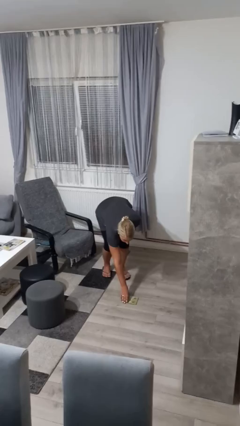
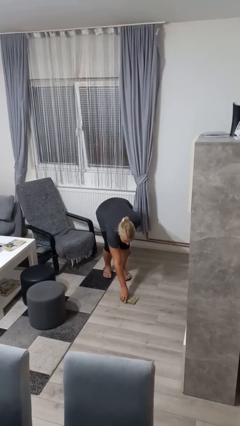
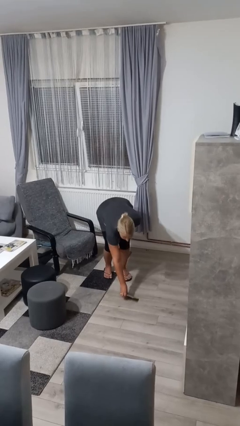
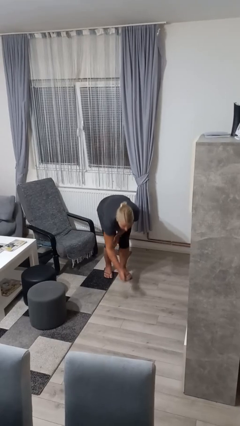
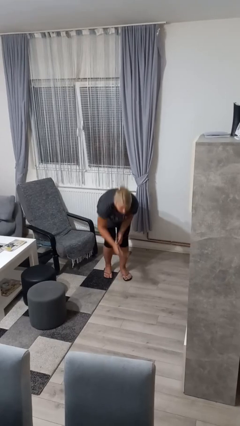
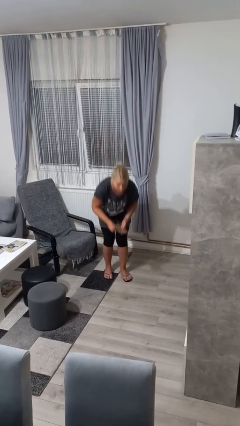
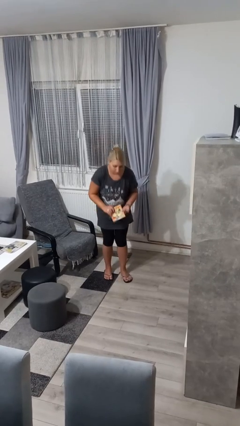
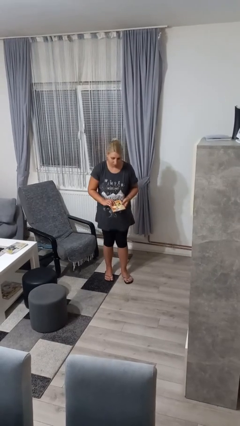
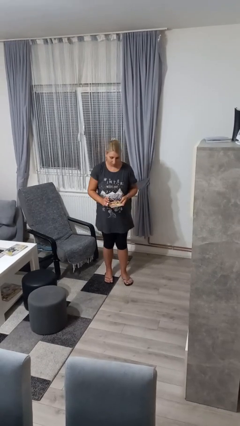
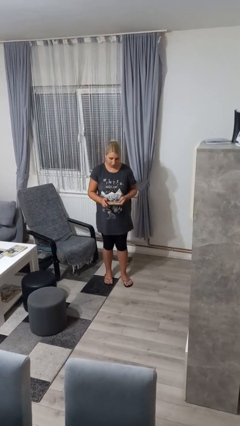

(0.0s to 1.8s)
person picks up object from floor

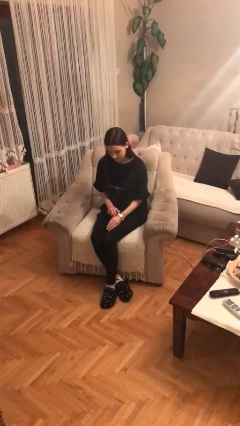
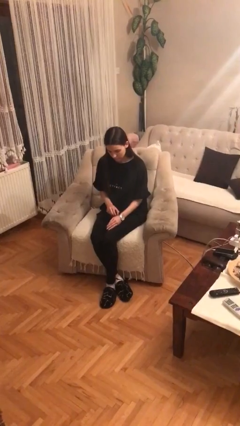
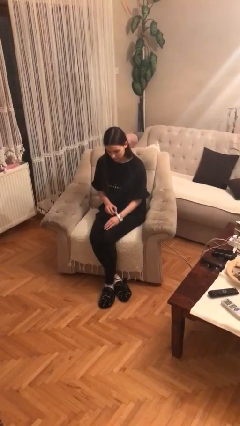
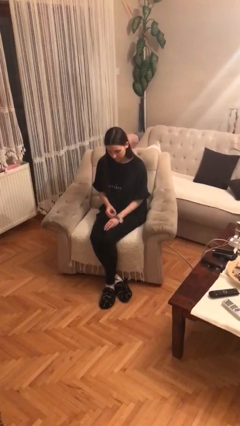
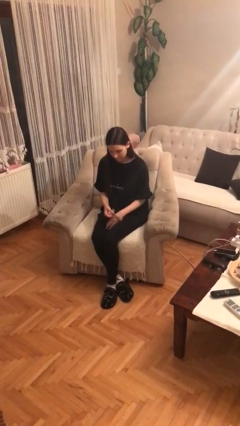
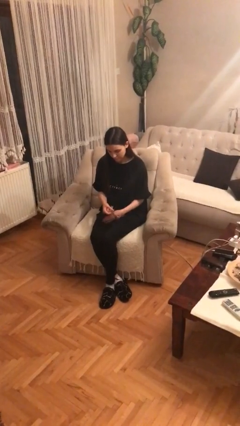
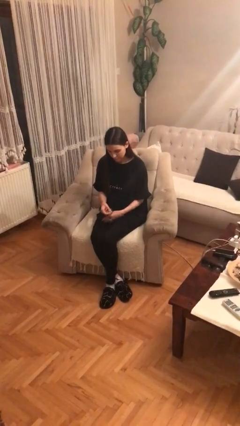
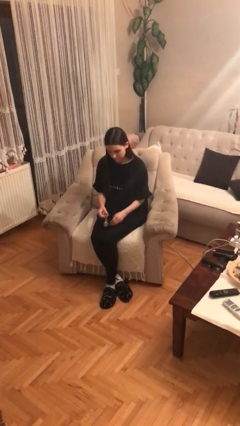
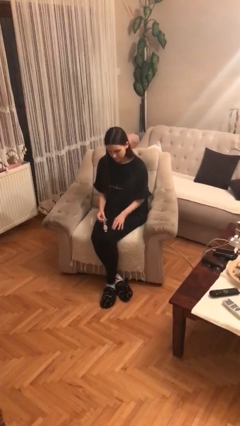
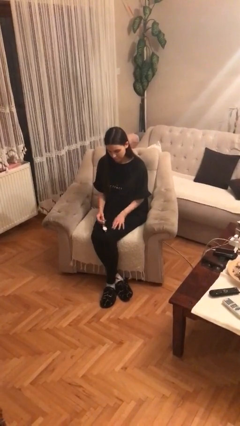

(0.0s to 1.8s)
person takes off wristwatch

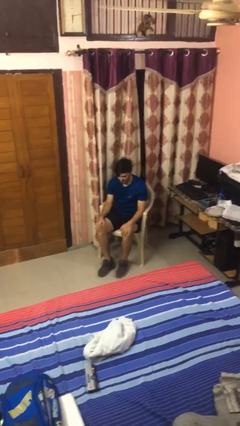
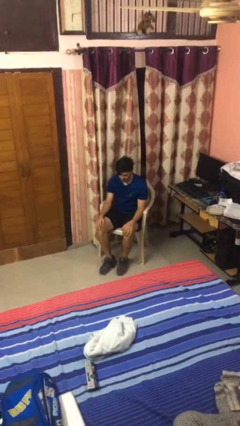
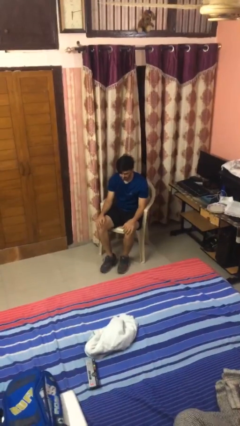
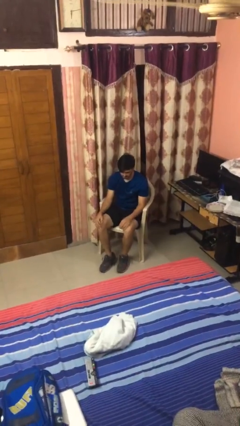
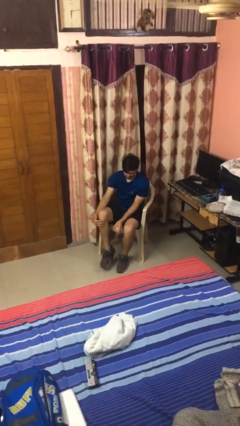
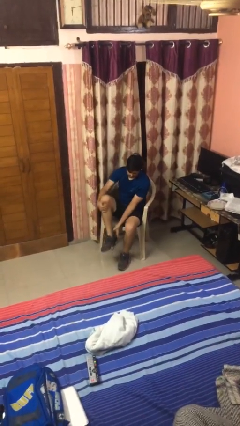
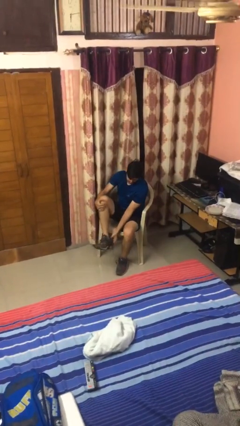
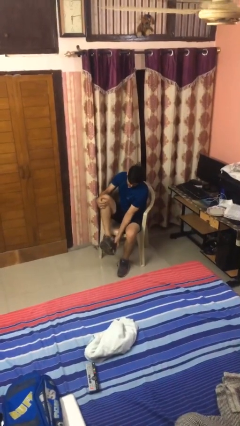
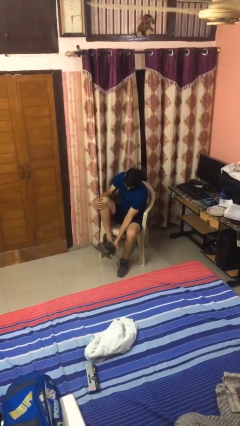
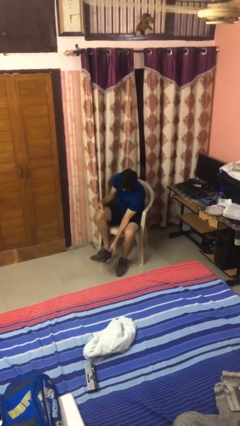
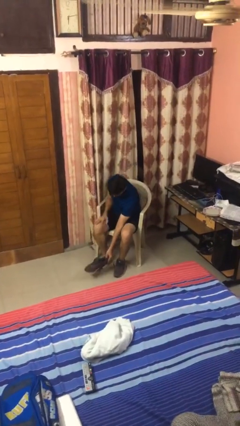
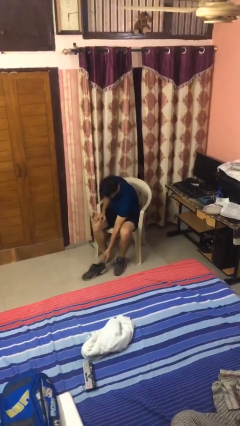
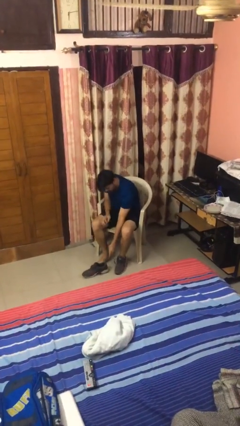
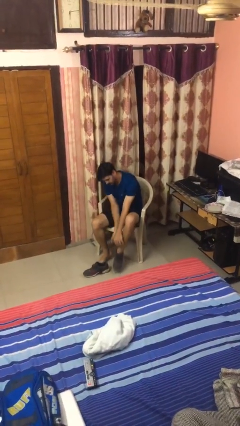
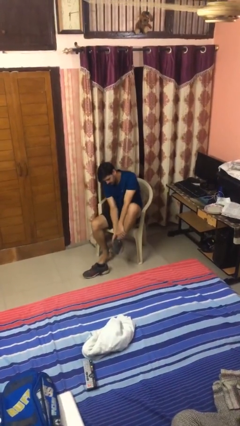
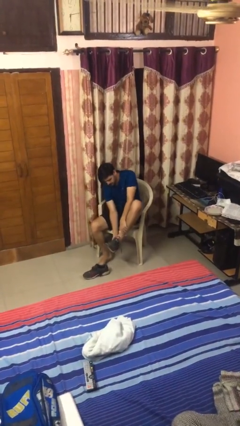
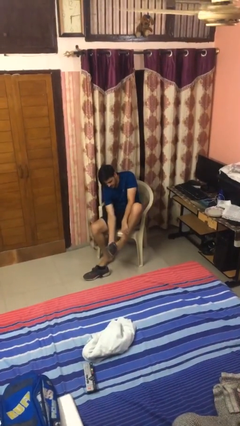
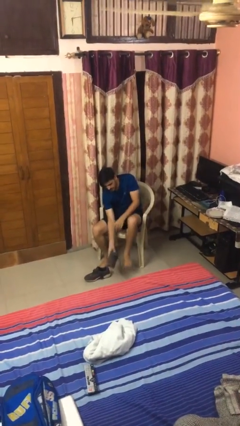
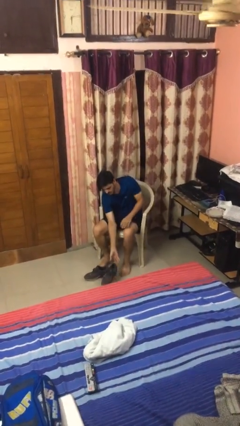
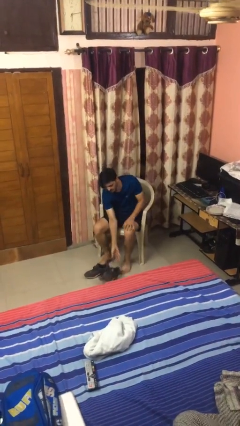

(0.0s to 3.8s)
person takes off boots

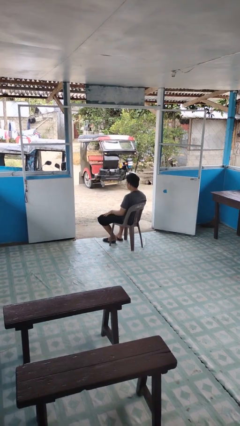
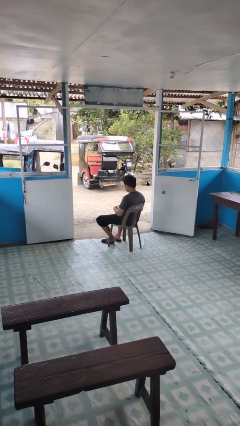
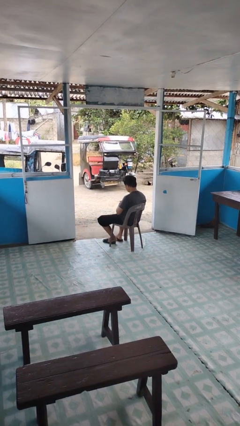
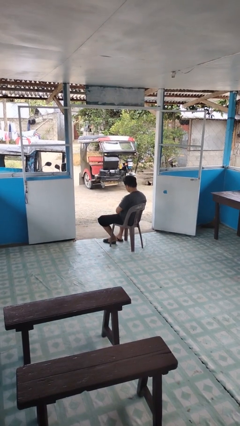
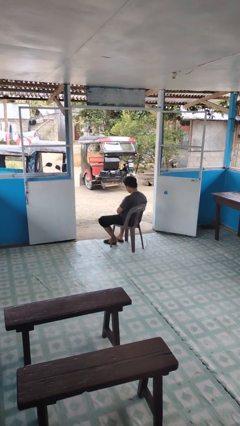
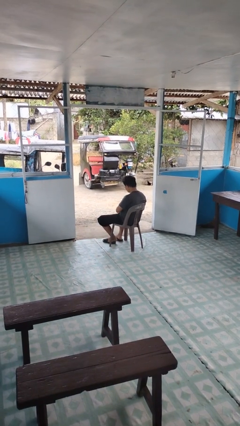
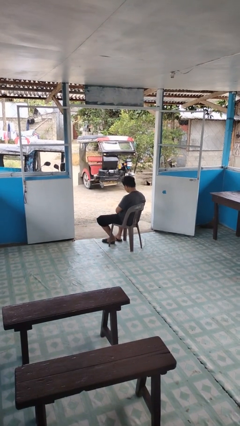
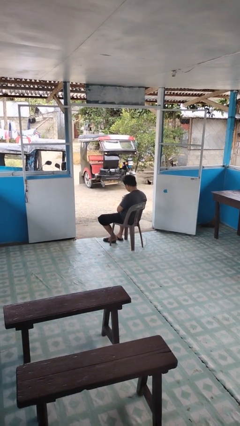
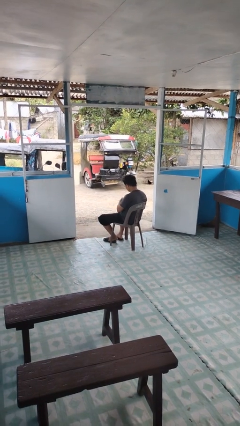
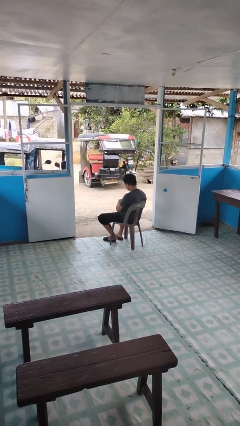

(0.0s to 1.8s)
person looks at hands in lap

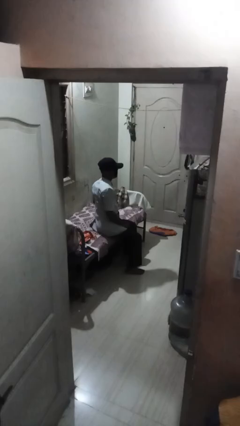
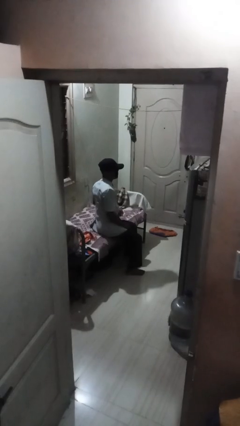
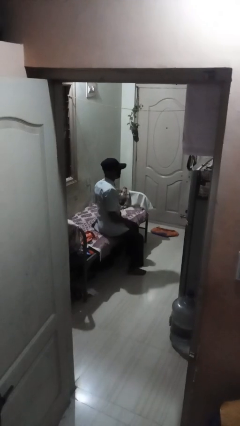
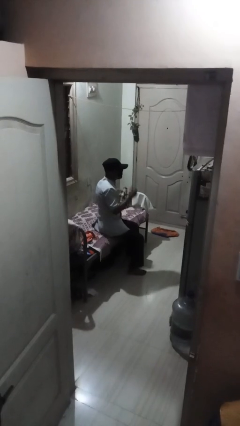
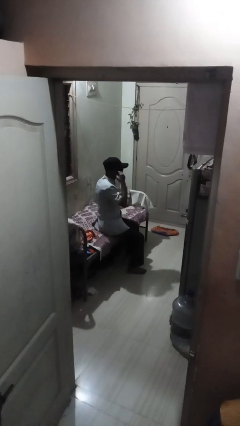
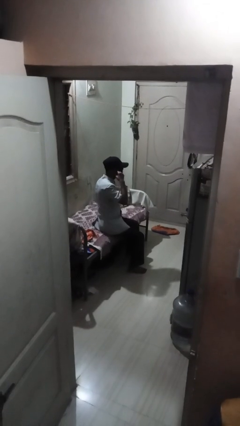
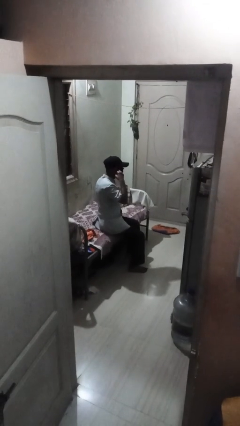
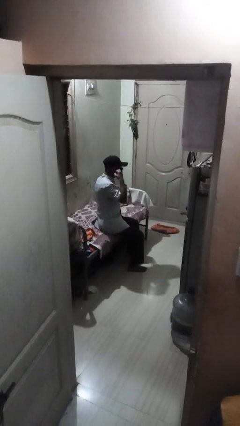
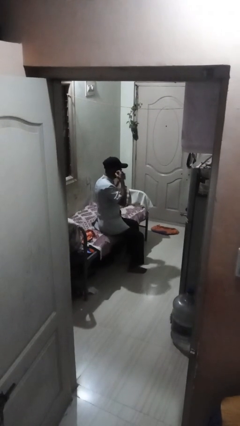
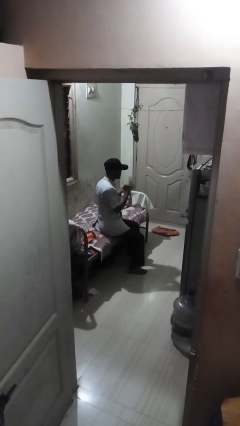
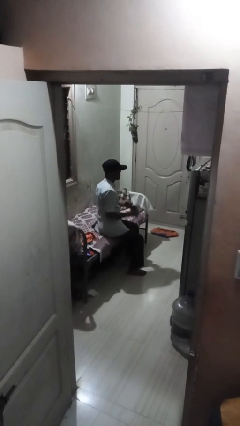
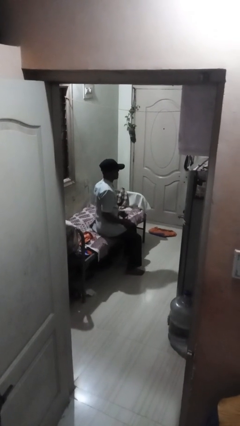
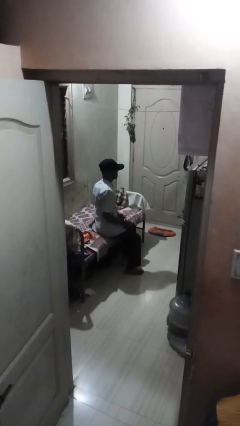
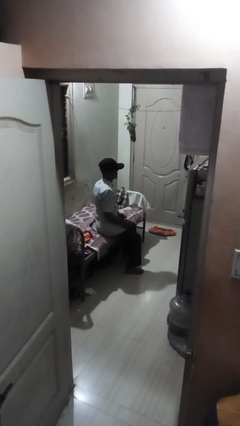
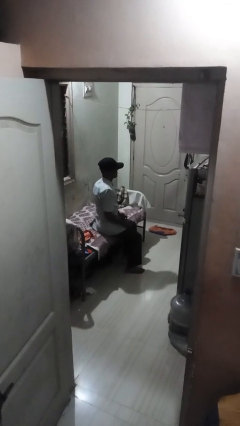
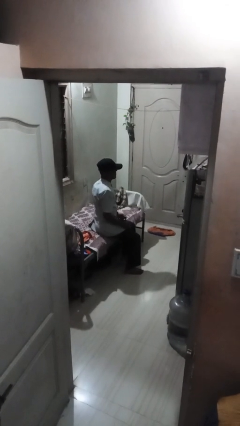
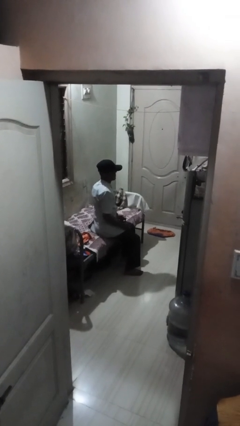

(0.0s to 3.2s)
person takes off facemask

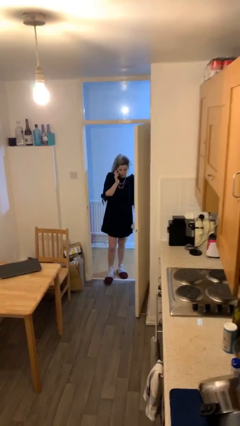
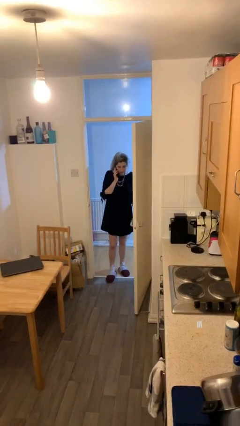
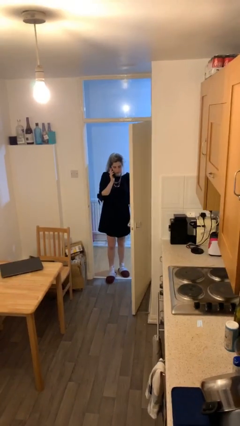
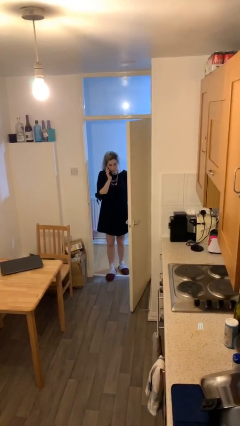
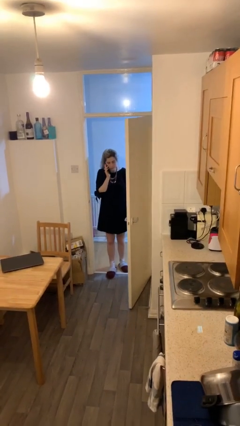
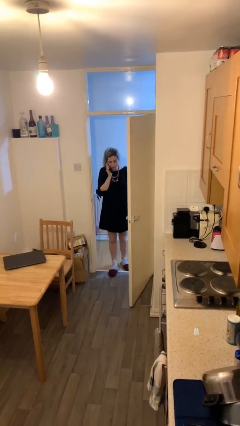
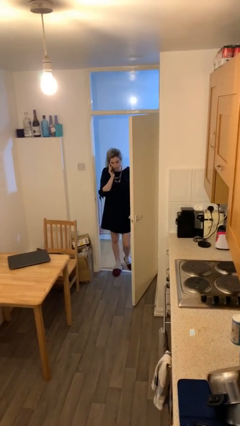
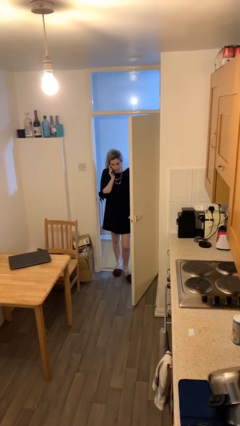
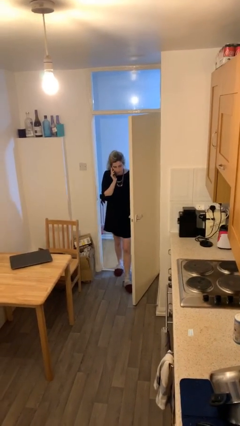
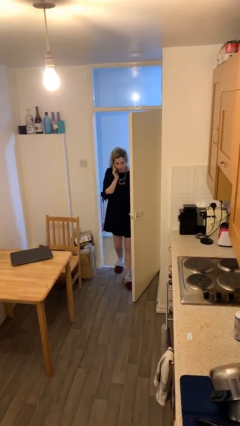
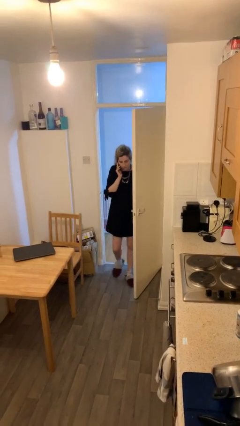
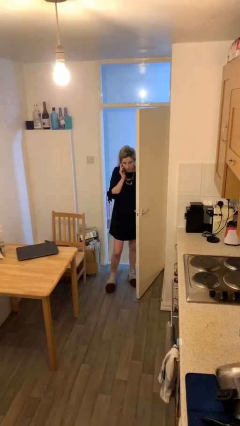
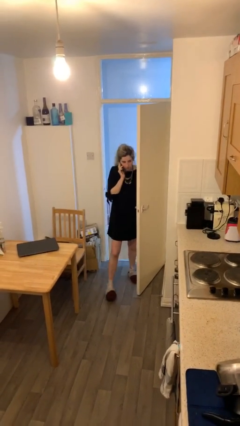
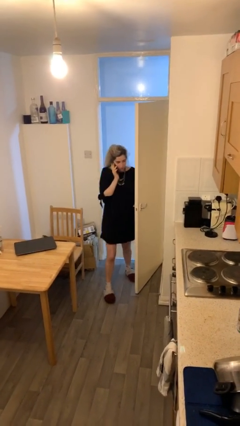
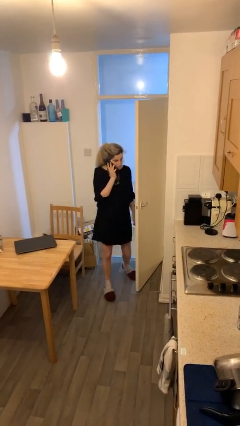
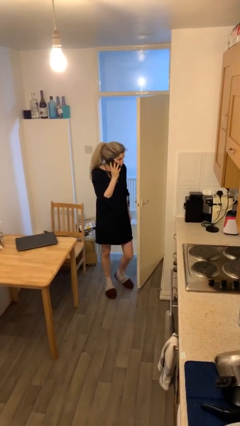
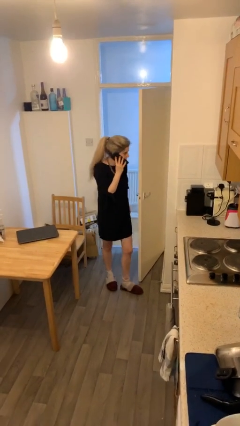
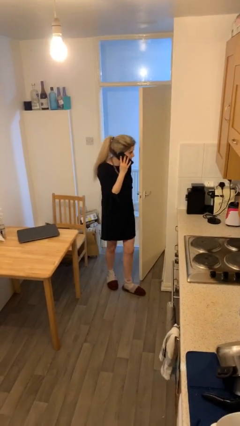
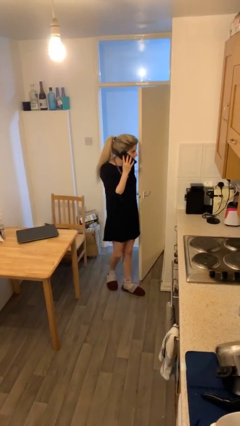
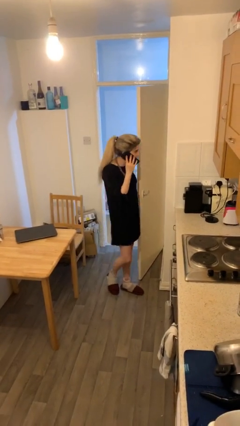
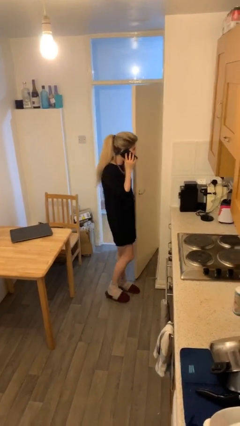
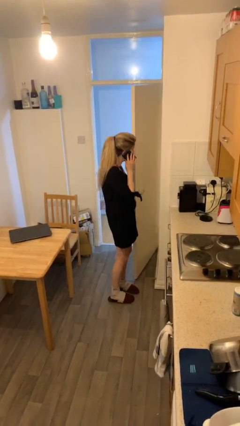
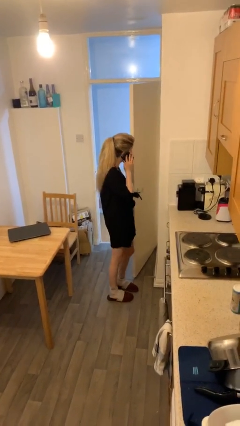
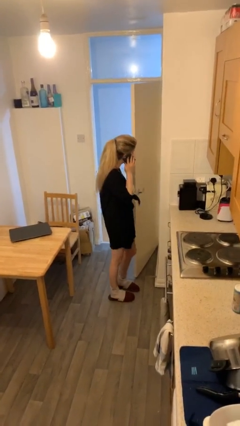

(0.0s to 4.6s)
person enters scene through structure

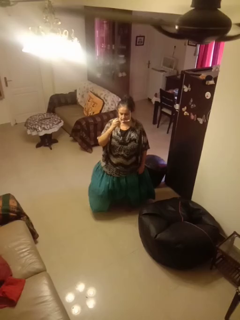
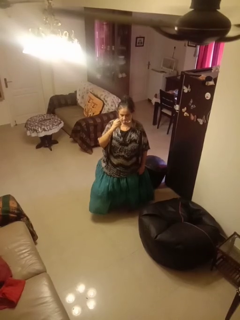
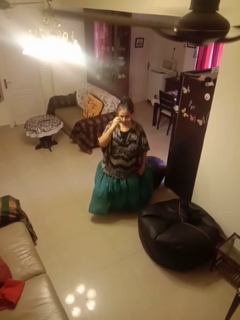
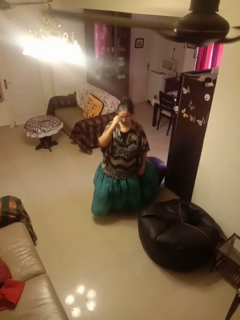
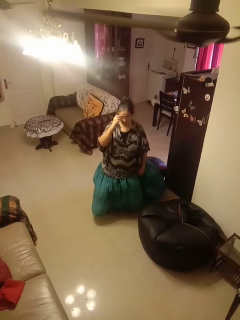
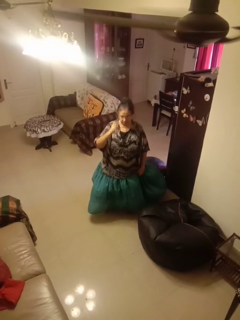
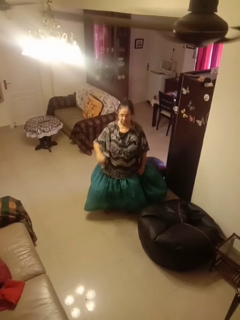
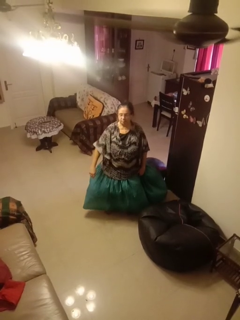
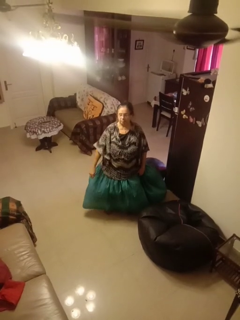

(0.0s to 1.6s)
person puts on glasses
